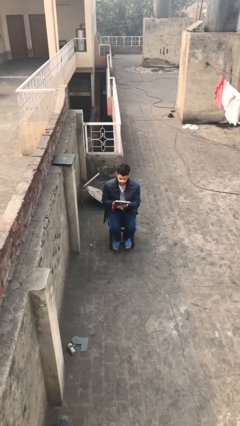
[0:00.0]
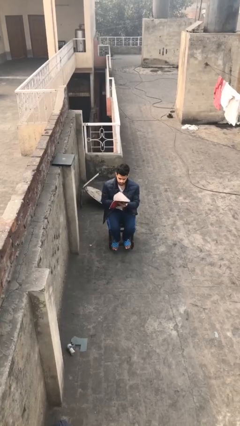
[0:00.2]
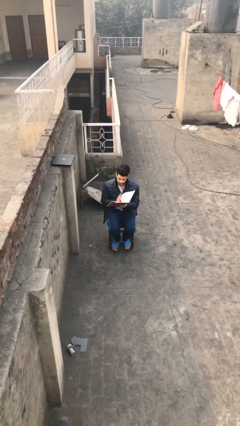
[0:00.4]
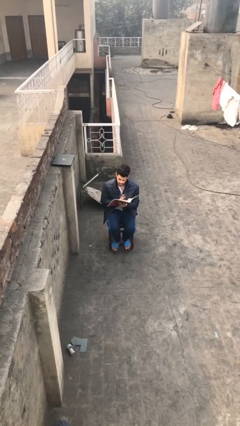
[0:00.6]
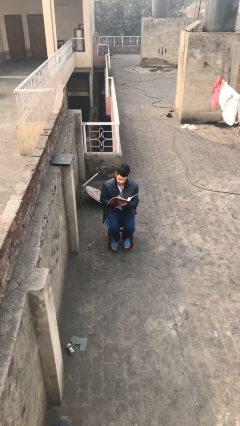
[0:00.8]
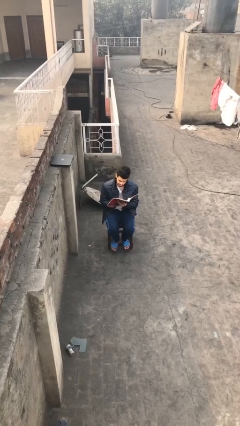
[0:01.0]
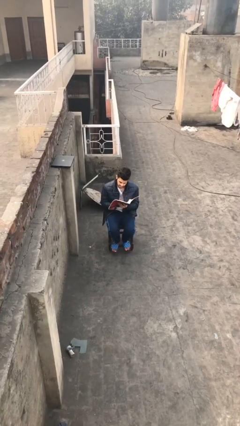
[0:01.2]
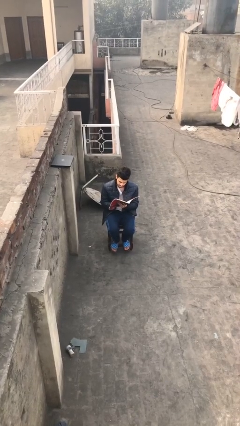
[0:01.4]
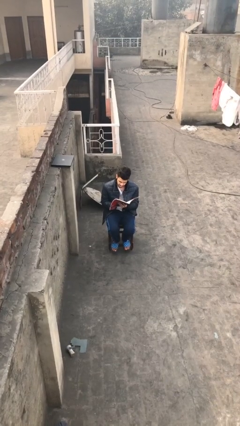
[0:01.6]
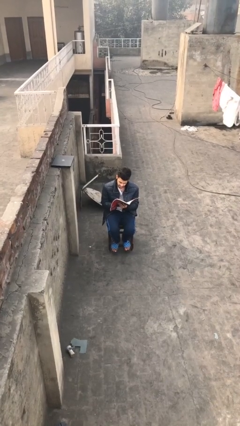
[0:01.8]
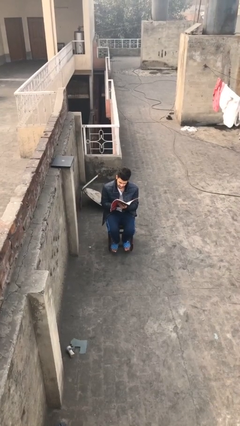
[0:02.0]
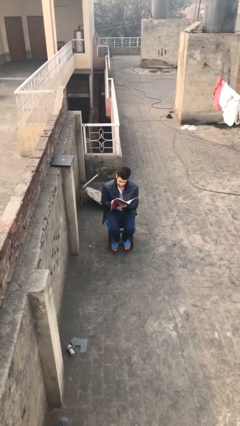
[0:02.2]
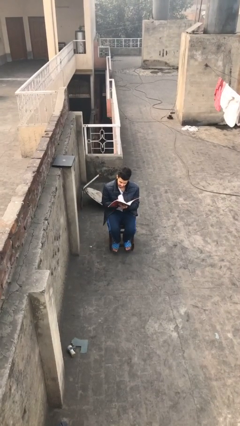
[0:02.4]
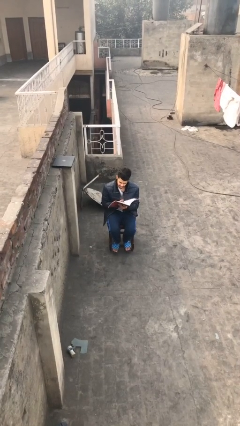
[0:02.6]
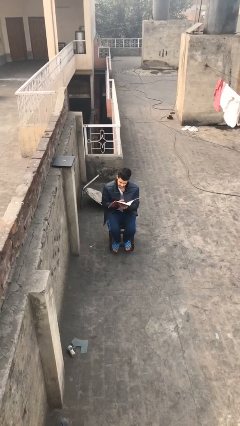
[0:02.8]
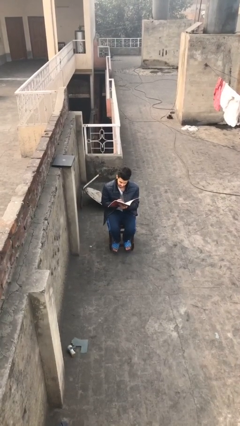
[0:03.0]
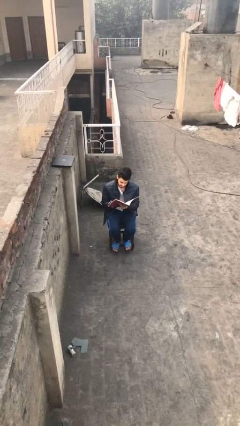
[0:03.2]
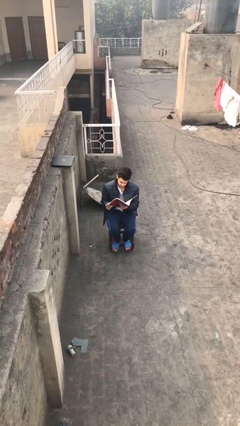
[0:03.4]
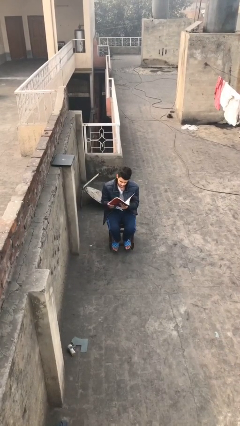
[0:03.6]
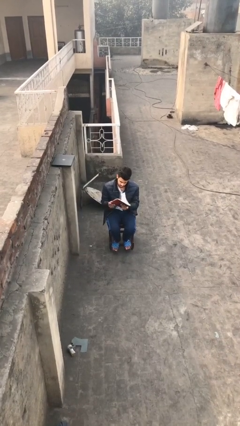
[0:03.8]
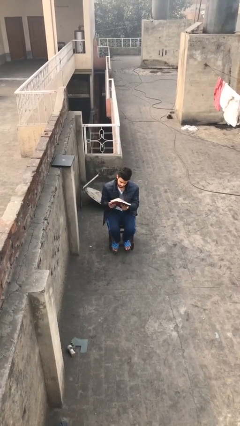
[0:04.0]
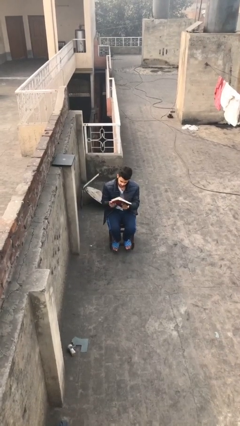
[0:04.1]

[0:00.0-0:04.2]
person reads document

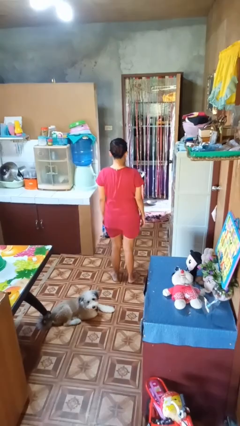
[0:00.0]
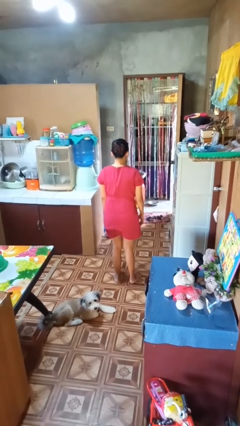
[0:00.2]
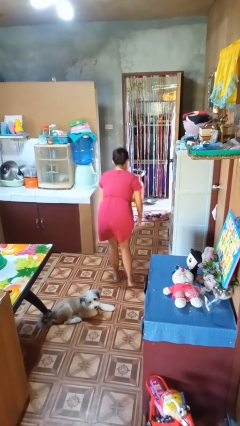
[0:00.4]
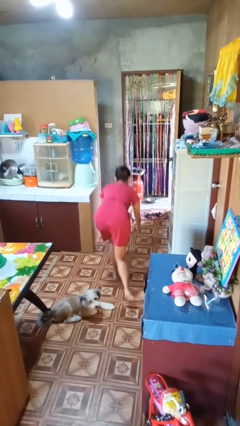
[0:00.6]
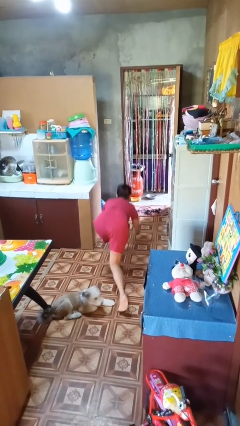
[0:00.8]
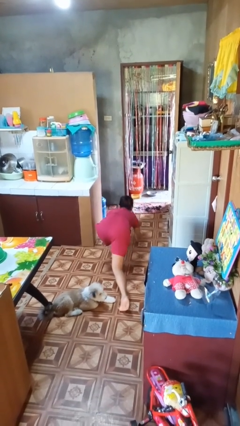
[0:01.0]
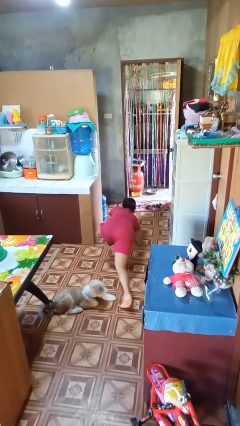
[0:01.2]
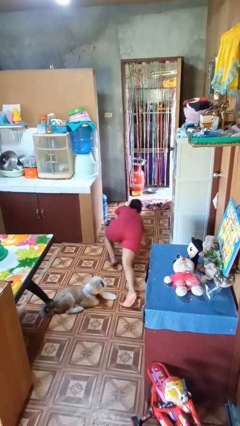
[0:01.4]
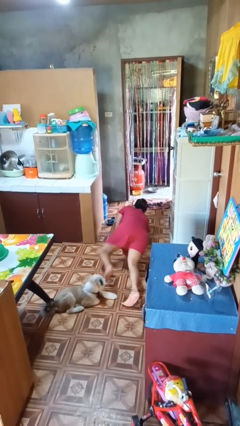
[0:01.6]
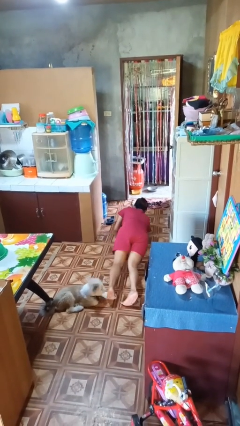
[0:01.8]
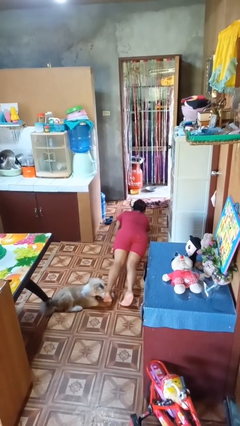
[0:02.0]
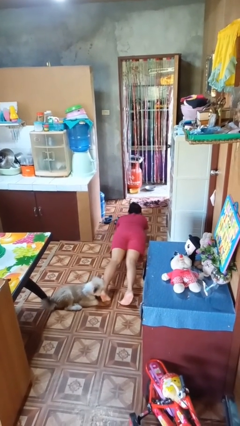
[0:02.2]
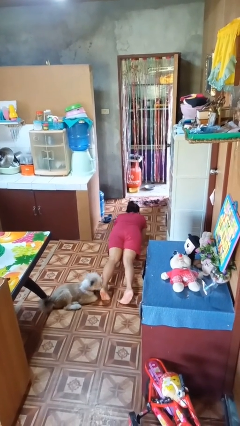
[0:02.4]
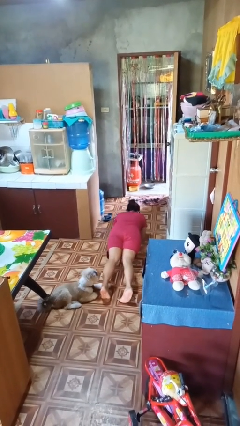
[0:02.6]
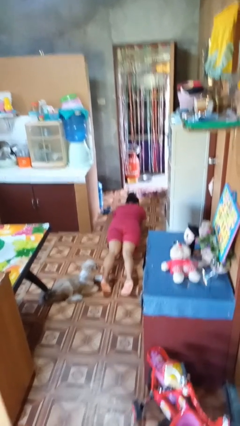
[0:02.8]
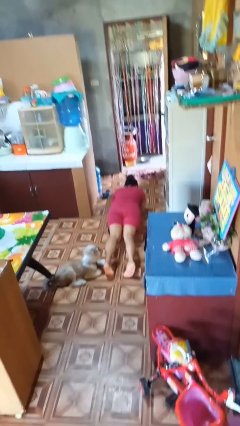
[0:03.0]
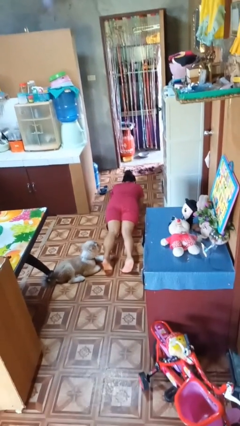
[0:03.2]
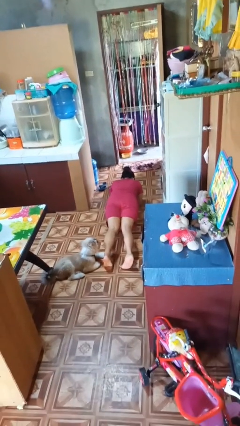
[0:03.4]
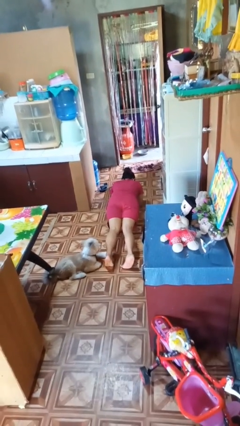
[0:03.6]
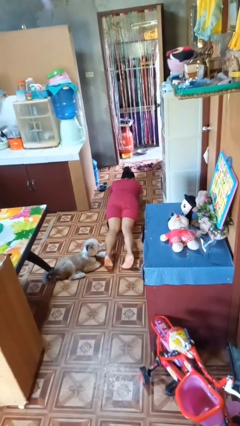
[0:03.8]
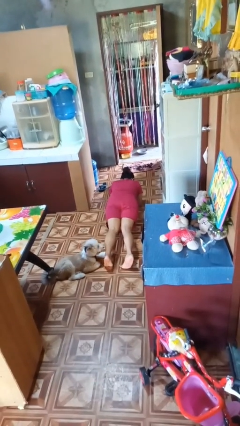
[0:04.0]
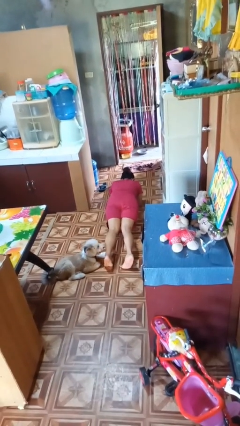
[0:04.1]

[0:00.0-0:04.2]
person exercises with plank

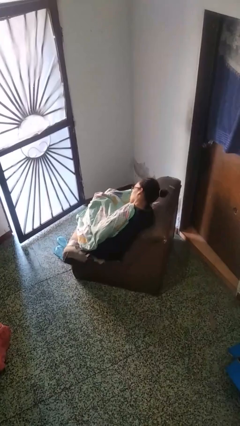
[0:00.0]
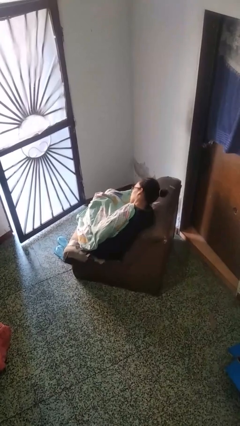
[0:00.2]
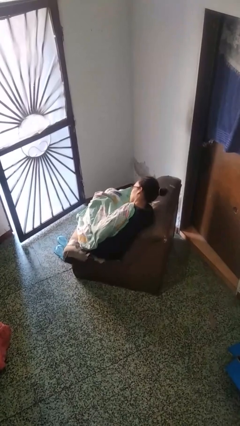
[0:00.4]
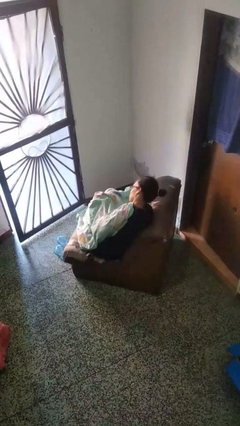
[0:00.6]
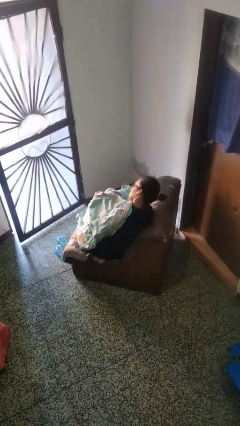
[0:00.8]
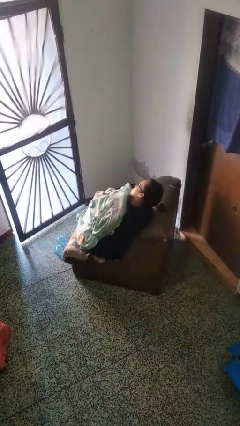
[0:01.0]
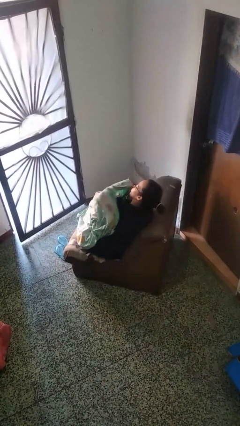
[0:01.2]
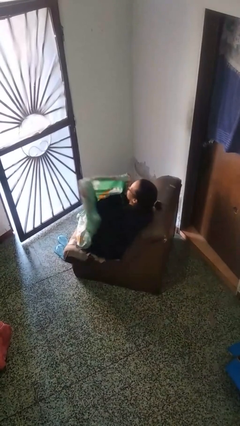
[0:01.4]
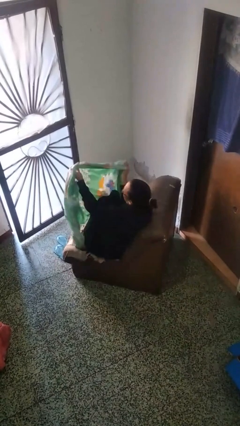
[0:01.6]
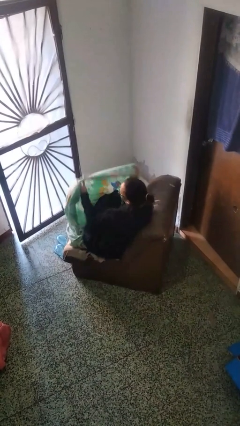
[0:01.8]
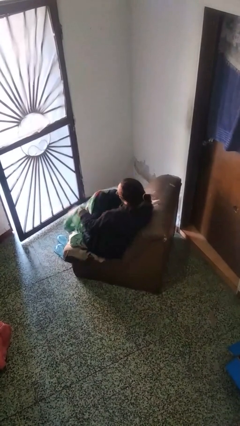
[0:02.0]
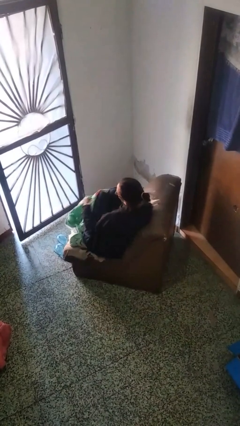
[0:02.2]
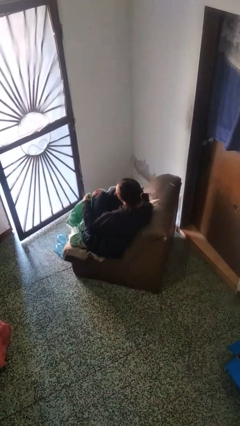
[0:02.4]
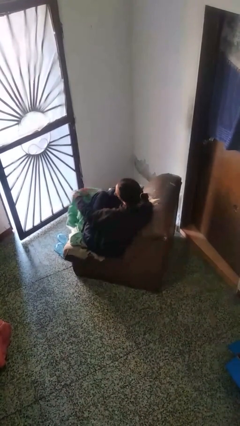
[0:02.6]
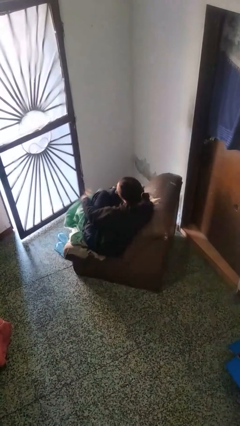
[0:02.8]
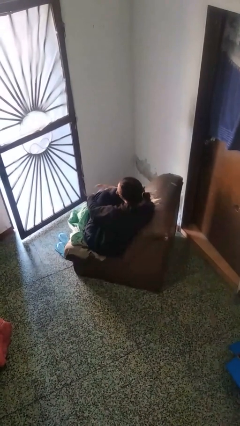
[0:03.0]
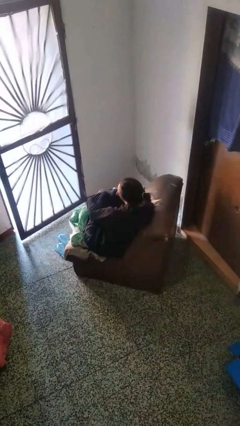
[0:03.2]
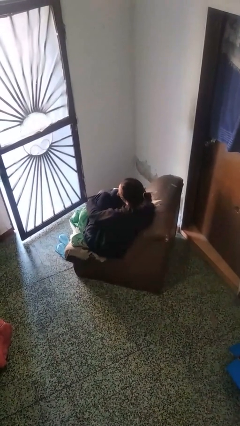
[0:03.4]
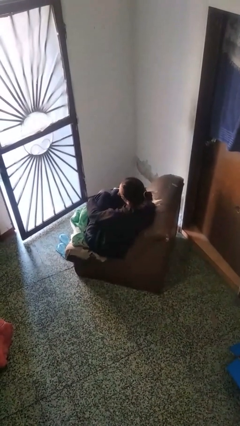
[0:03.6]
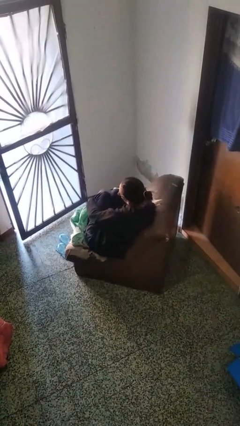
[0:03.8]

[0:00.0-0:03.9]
person uncovers with blanket

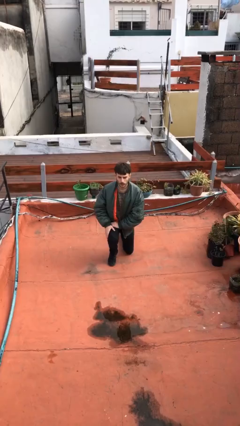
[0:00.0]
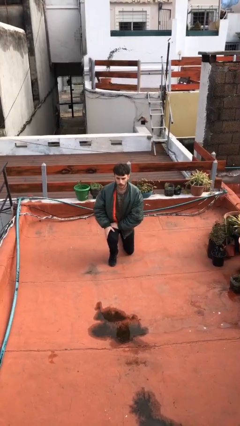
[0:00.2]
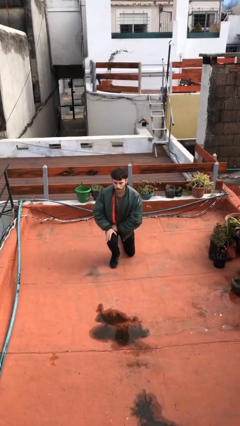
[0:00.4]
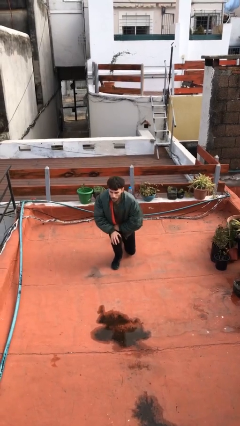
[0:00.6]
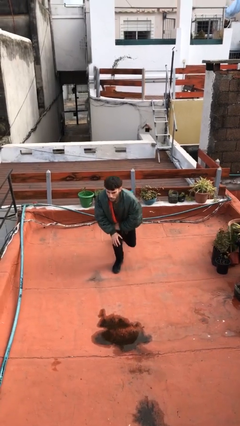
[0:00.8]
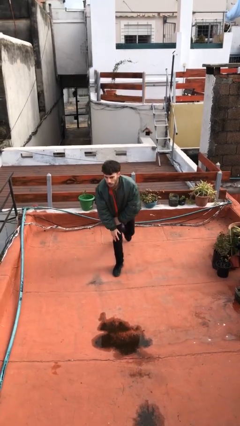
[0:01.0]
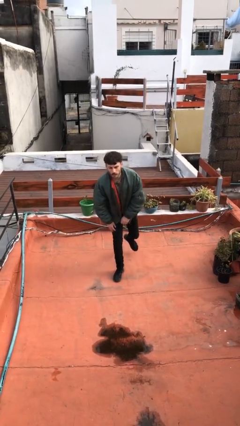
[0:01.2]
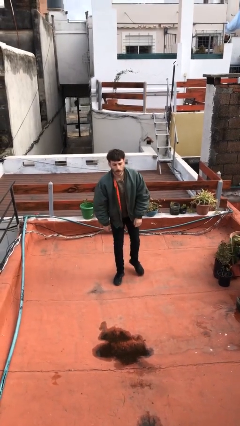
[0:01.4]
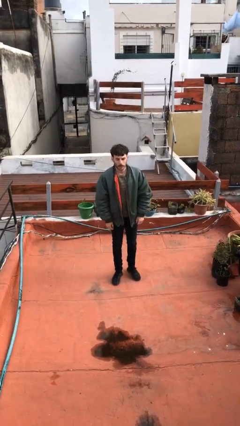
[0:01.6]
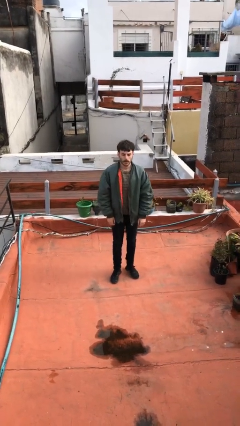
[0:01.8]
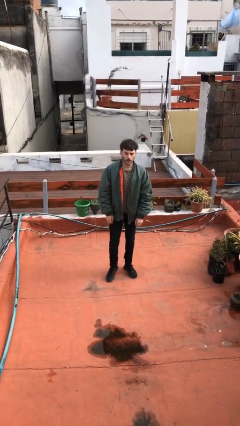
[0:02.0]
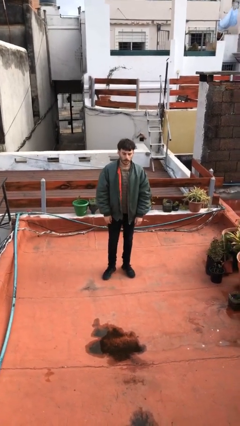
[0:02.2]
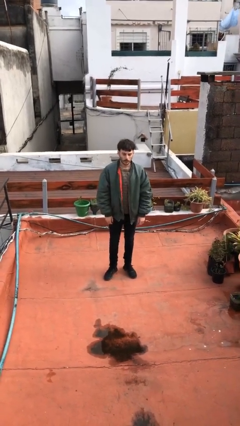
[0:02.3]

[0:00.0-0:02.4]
person stands up from floor

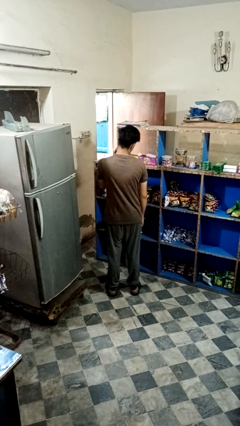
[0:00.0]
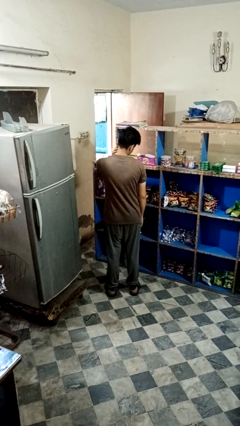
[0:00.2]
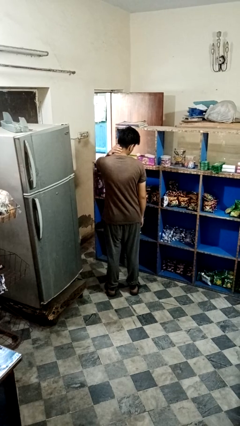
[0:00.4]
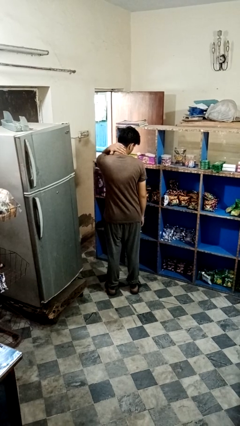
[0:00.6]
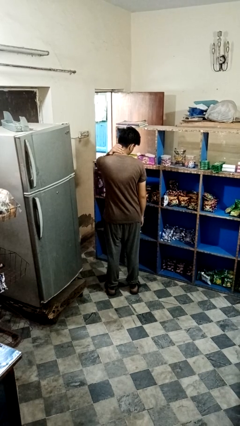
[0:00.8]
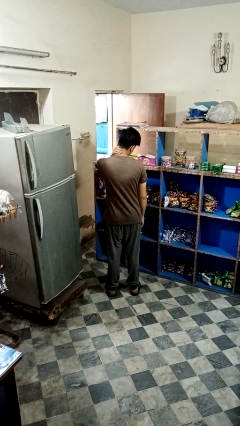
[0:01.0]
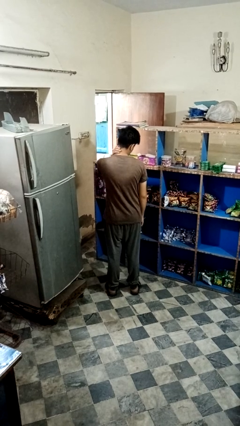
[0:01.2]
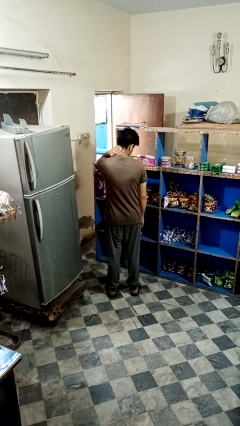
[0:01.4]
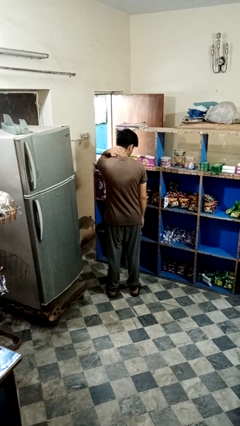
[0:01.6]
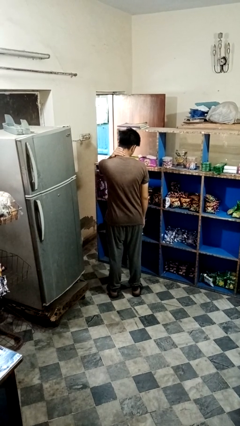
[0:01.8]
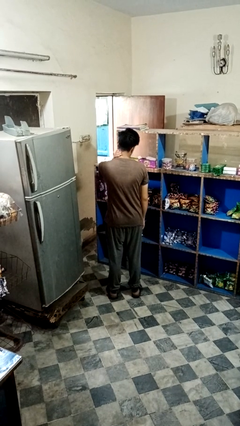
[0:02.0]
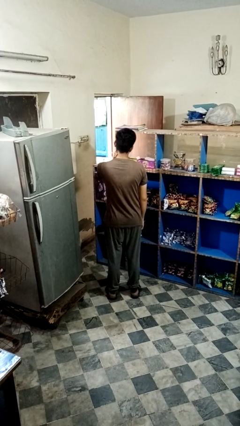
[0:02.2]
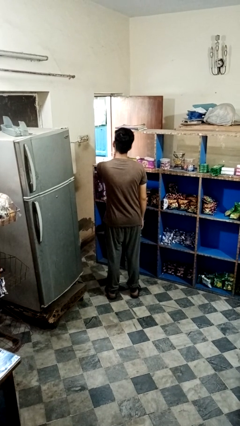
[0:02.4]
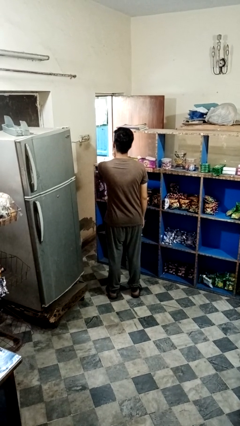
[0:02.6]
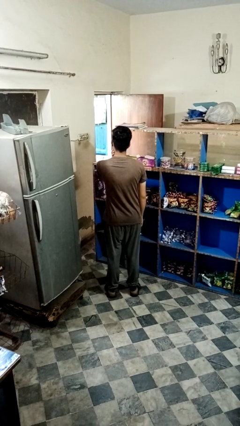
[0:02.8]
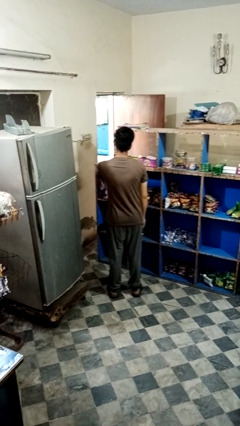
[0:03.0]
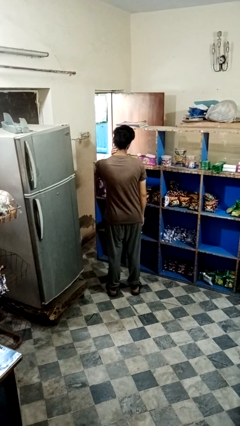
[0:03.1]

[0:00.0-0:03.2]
person rubs neck
